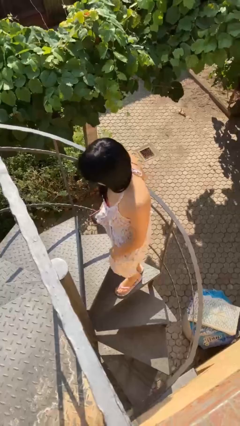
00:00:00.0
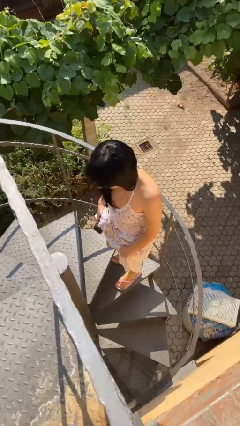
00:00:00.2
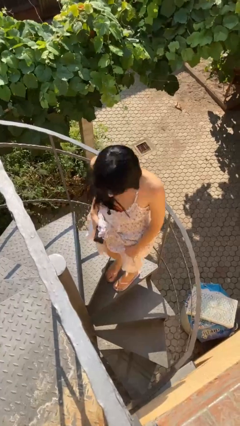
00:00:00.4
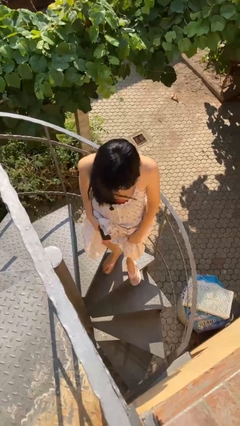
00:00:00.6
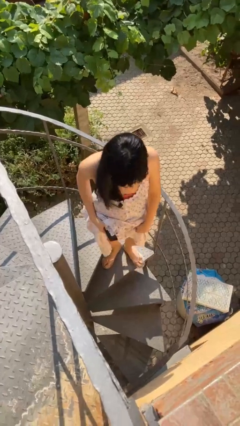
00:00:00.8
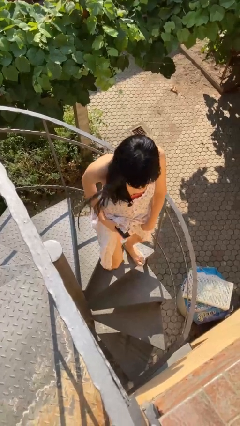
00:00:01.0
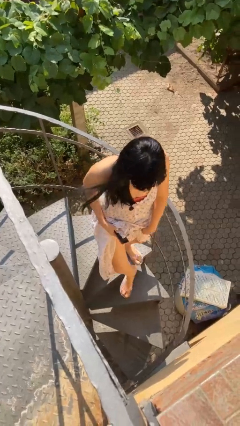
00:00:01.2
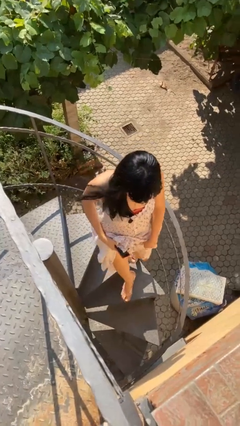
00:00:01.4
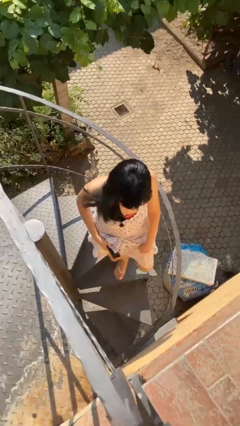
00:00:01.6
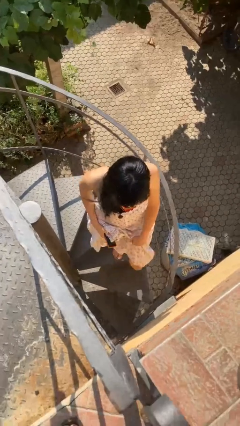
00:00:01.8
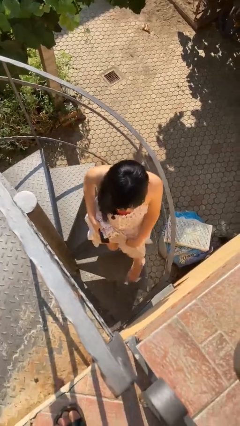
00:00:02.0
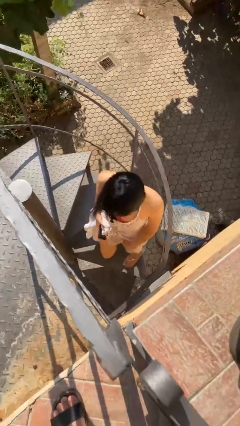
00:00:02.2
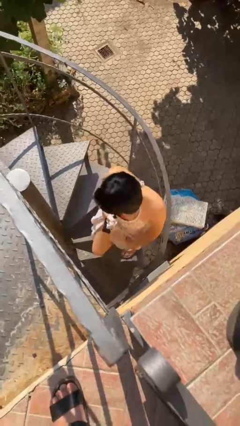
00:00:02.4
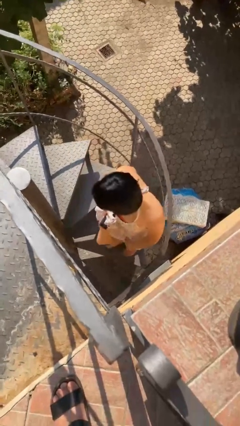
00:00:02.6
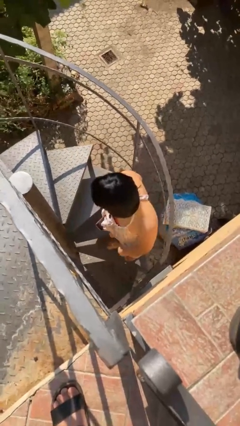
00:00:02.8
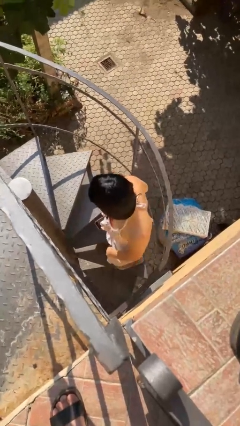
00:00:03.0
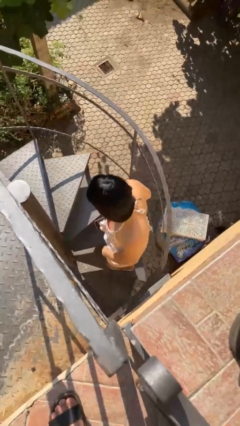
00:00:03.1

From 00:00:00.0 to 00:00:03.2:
person climbs down stairs

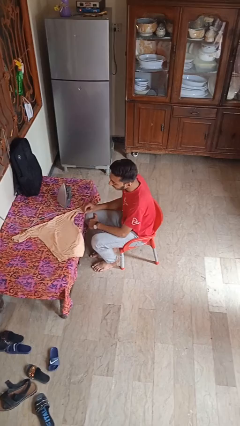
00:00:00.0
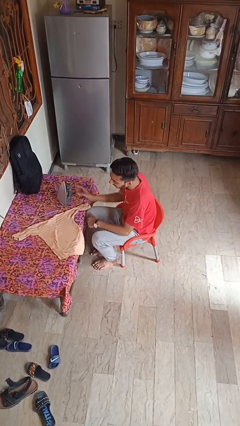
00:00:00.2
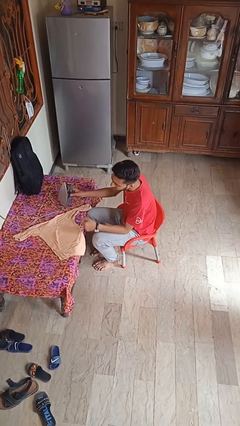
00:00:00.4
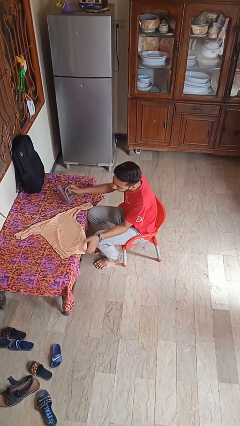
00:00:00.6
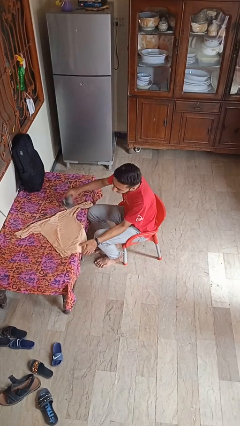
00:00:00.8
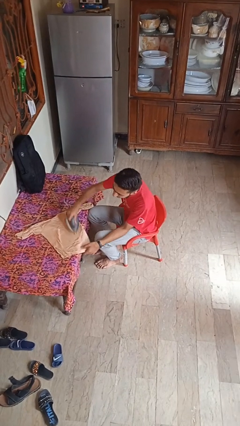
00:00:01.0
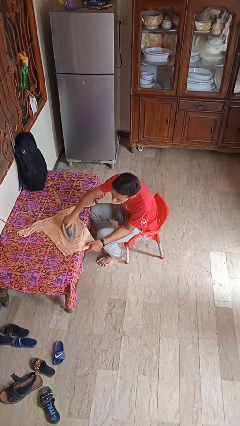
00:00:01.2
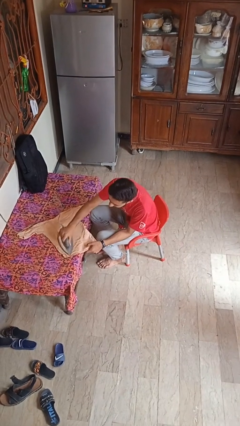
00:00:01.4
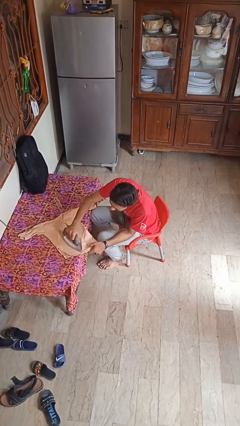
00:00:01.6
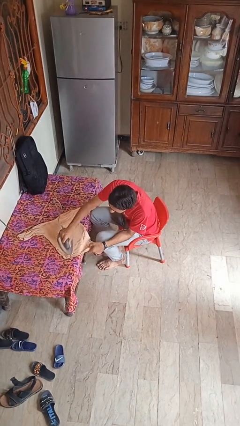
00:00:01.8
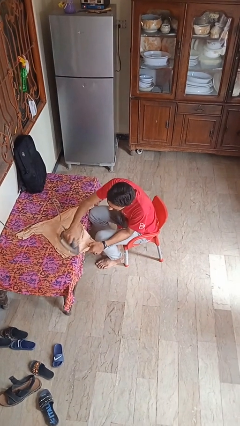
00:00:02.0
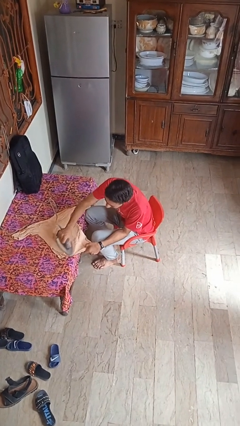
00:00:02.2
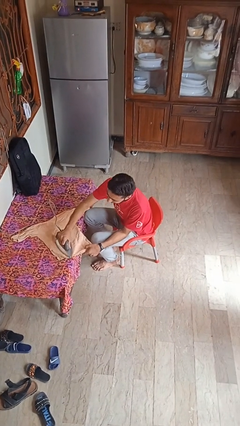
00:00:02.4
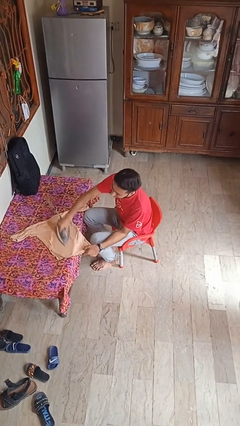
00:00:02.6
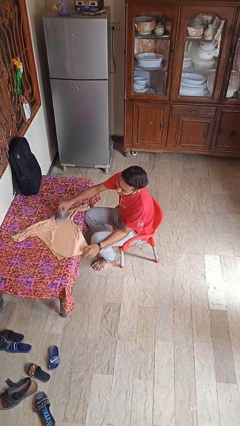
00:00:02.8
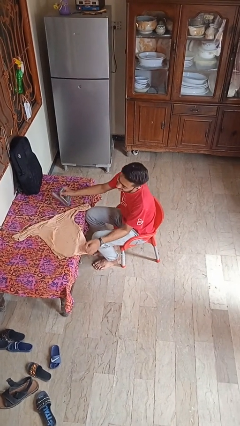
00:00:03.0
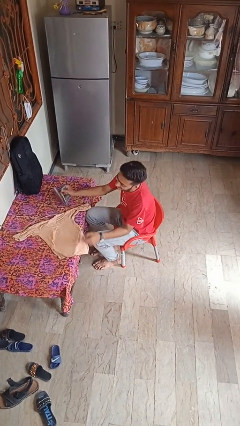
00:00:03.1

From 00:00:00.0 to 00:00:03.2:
person irons clothes

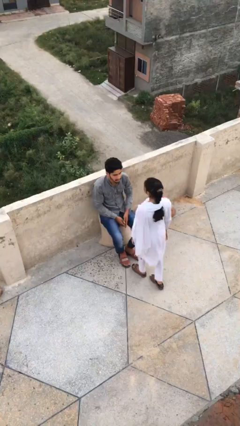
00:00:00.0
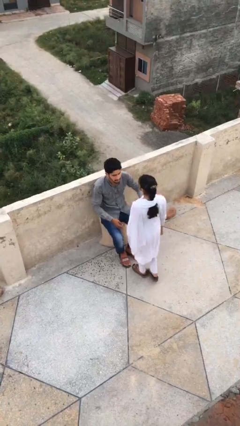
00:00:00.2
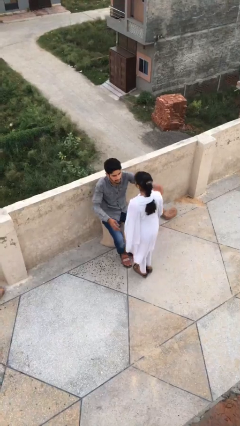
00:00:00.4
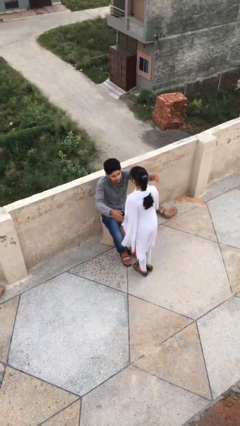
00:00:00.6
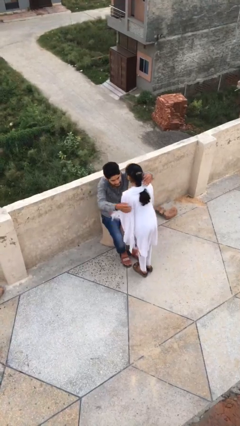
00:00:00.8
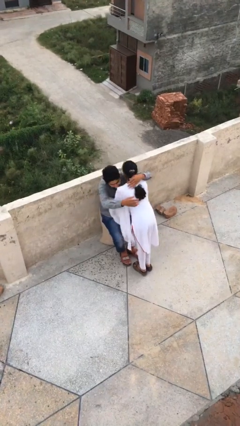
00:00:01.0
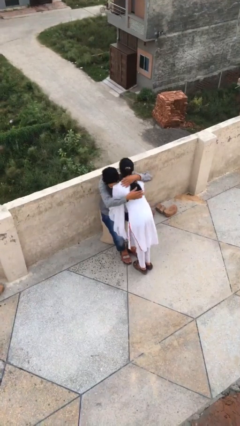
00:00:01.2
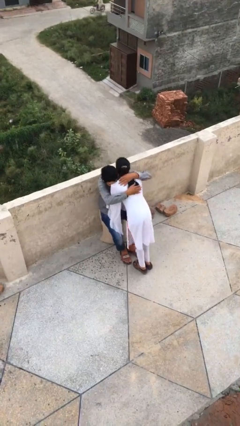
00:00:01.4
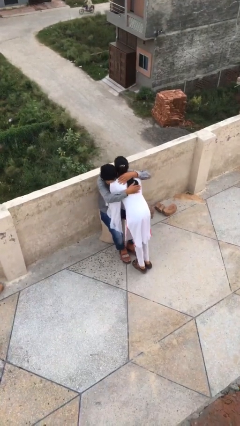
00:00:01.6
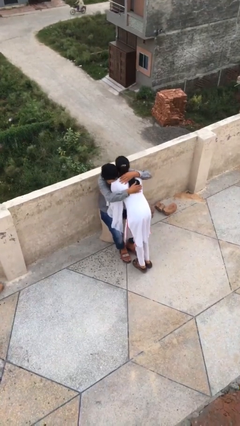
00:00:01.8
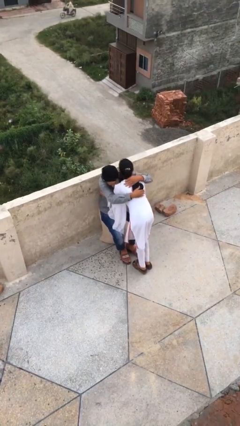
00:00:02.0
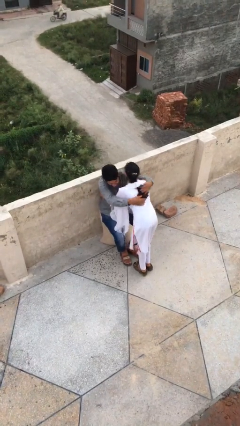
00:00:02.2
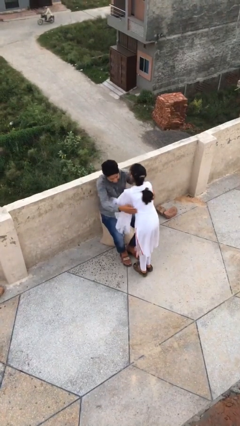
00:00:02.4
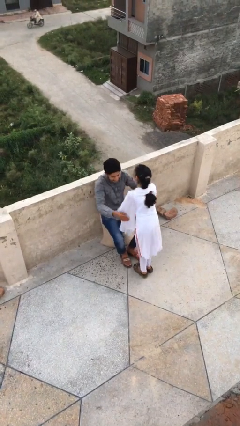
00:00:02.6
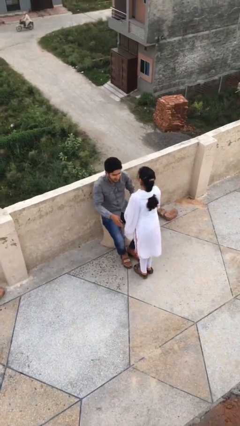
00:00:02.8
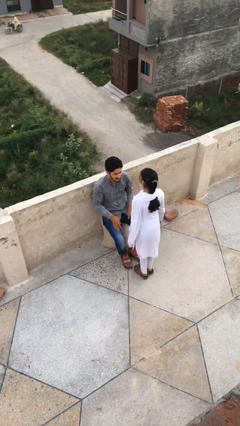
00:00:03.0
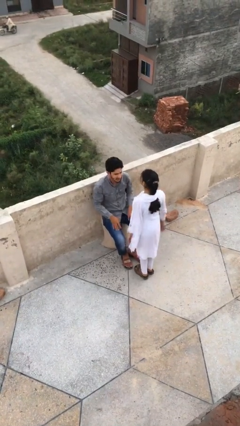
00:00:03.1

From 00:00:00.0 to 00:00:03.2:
person embraces person

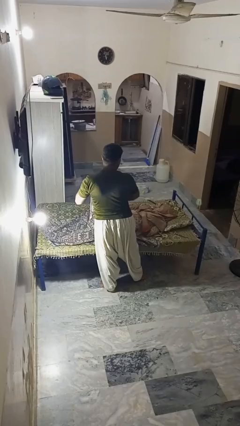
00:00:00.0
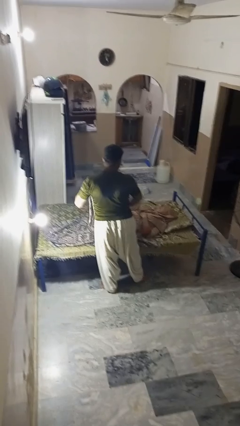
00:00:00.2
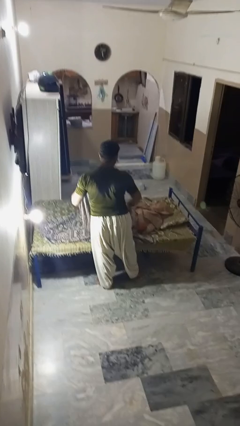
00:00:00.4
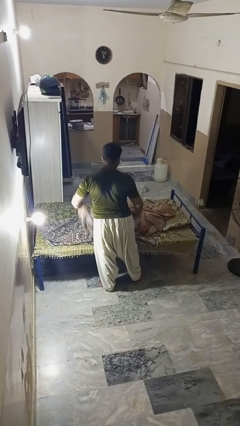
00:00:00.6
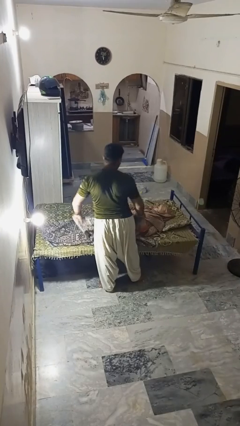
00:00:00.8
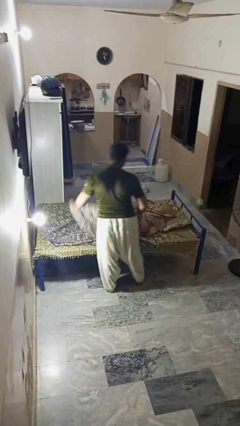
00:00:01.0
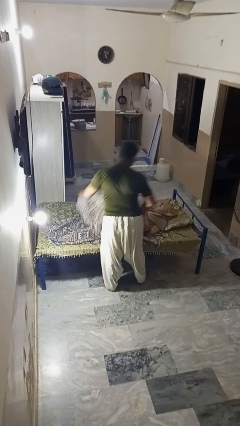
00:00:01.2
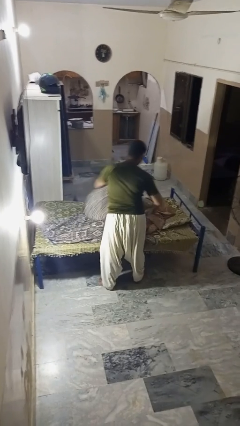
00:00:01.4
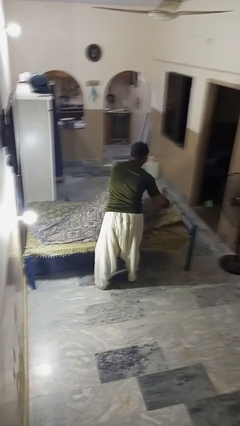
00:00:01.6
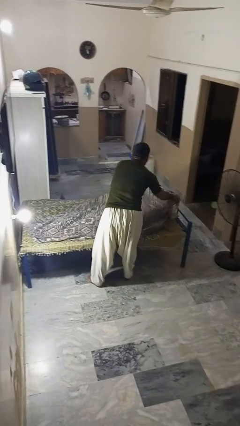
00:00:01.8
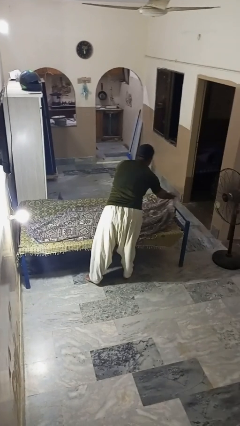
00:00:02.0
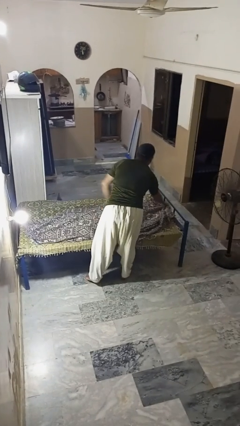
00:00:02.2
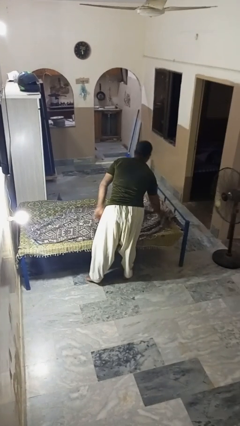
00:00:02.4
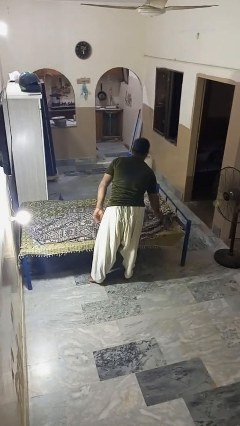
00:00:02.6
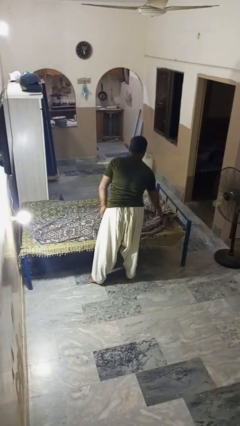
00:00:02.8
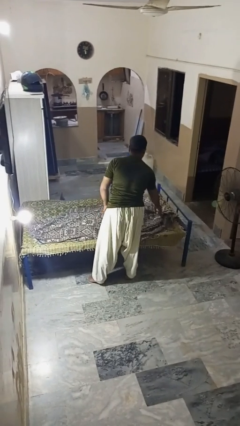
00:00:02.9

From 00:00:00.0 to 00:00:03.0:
person covers friend with blanket

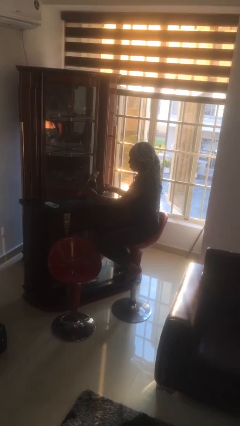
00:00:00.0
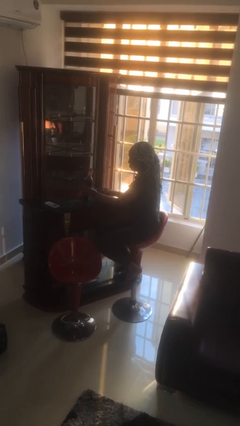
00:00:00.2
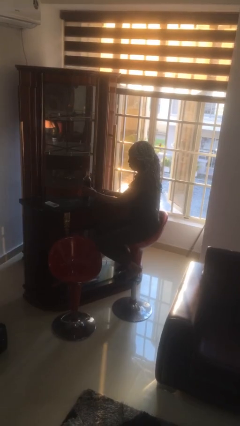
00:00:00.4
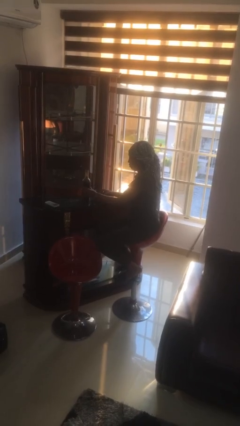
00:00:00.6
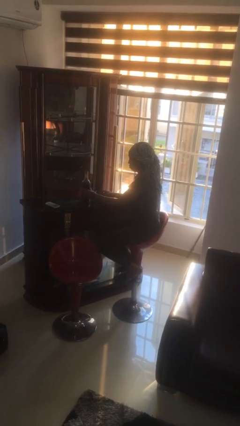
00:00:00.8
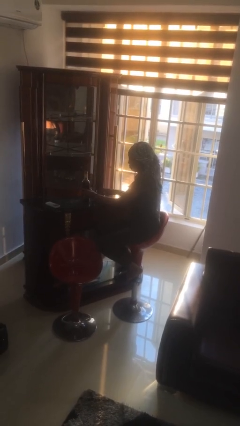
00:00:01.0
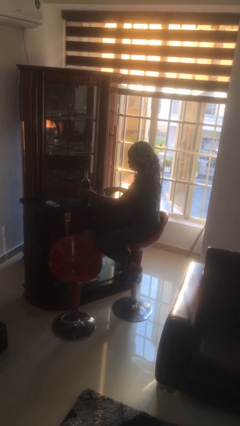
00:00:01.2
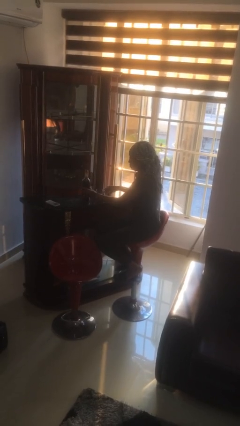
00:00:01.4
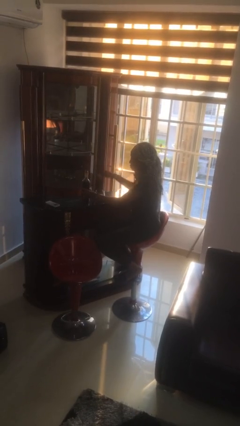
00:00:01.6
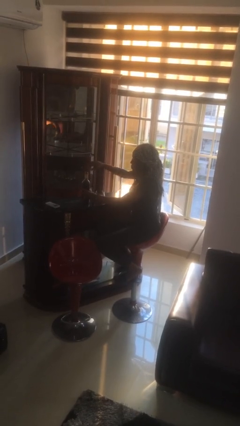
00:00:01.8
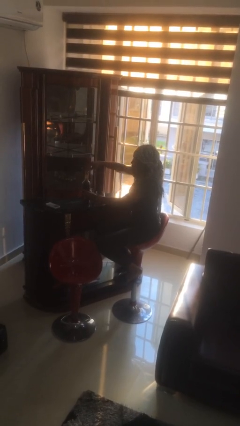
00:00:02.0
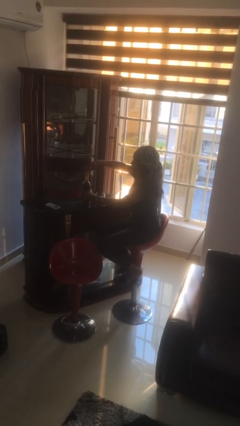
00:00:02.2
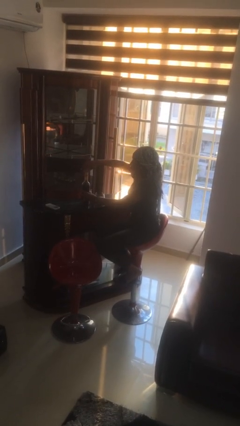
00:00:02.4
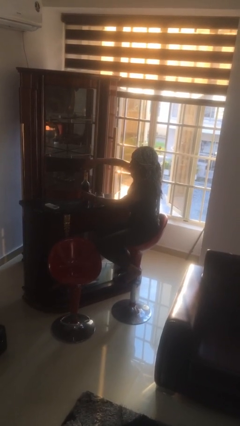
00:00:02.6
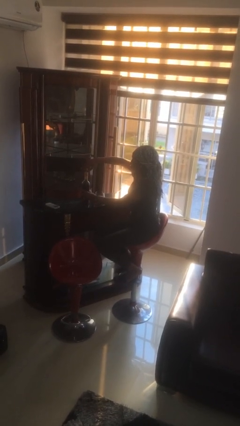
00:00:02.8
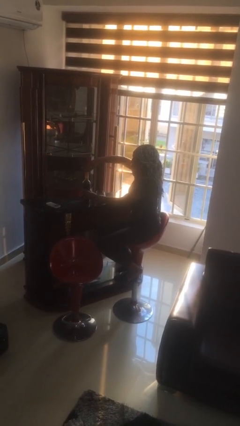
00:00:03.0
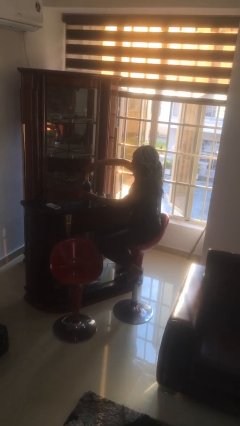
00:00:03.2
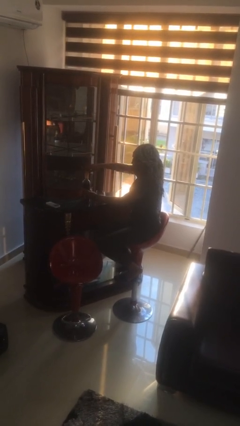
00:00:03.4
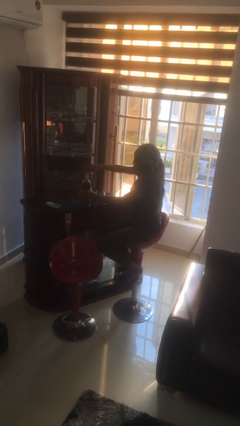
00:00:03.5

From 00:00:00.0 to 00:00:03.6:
person screws lid to bottle

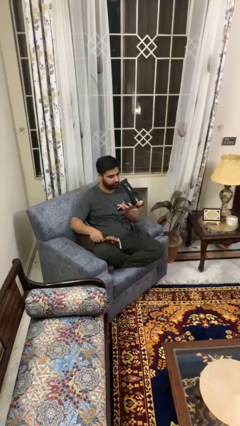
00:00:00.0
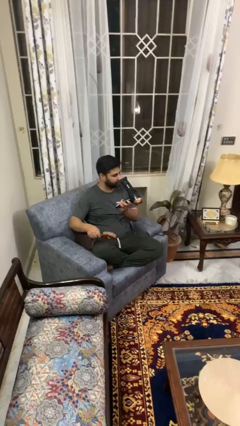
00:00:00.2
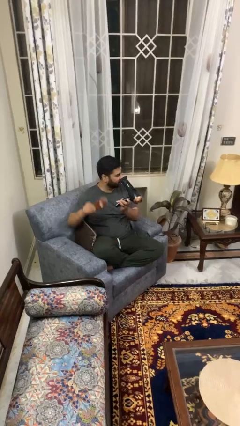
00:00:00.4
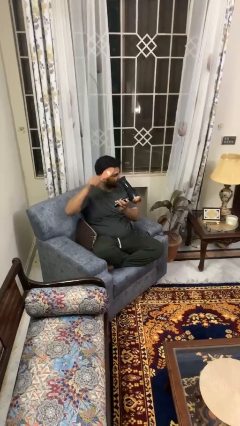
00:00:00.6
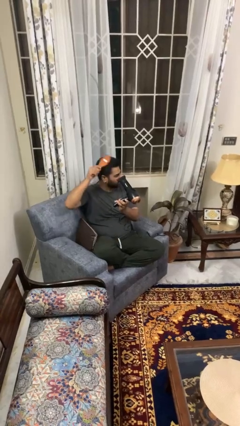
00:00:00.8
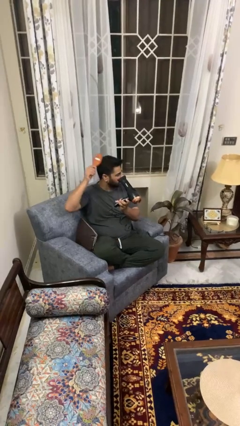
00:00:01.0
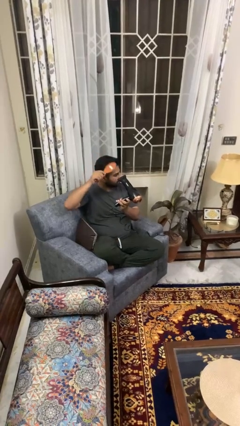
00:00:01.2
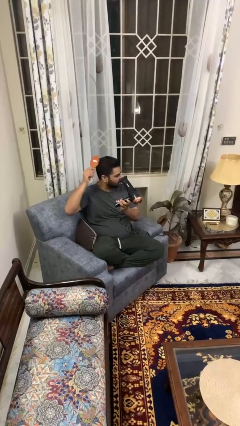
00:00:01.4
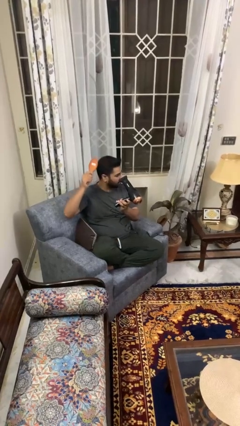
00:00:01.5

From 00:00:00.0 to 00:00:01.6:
person dries hair with hairdryer
